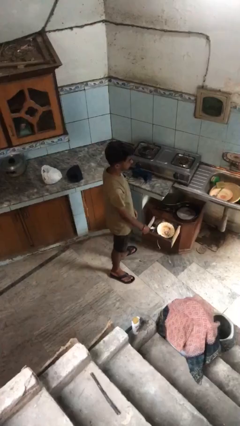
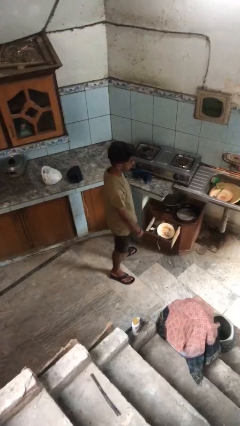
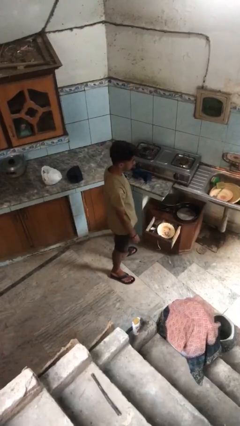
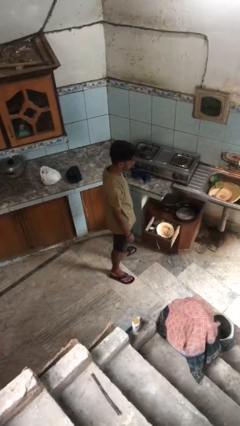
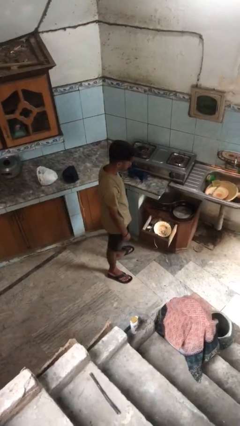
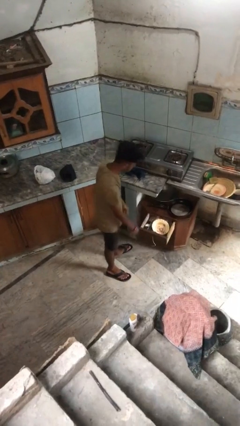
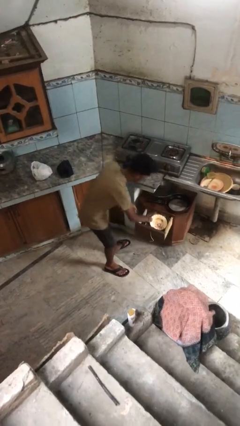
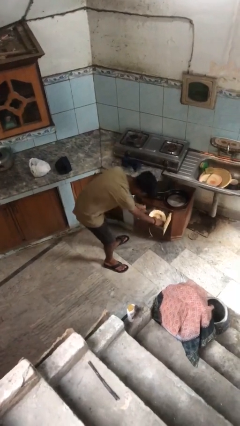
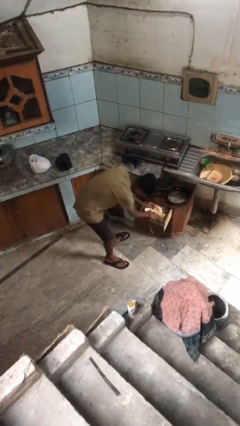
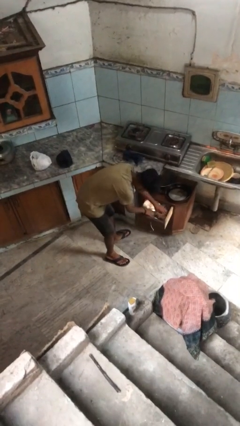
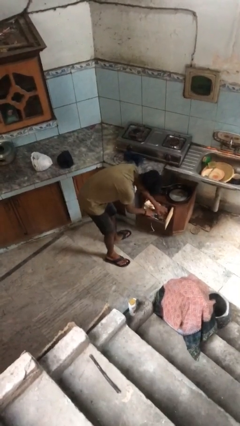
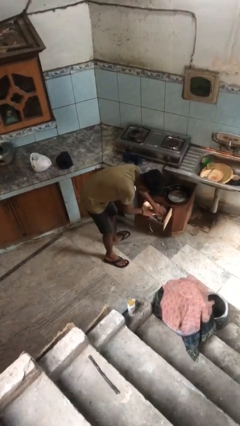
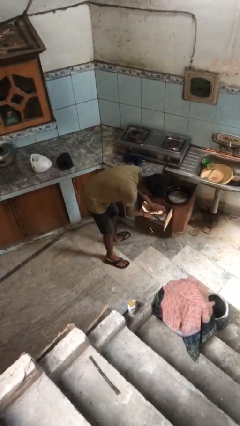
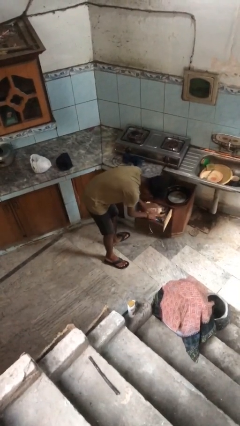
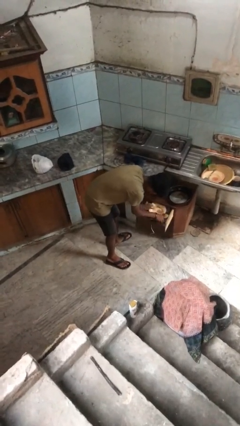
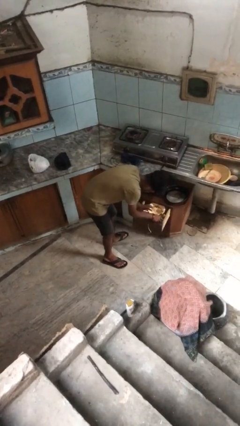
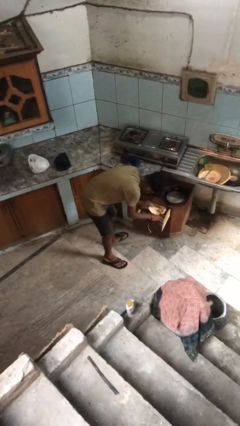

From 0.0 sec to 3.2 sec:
person searches in kitchen drawer

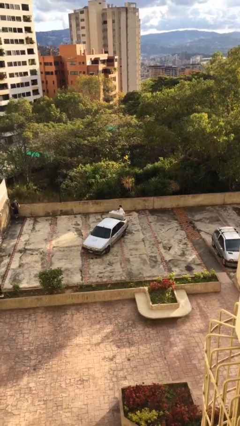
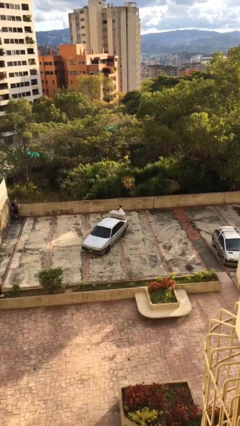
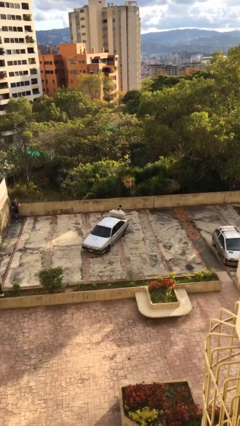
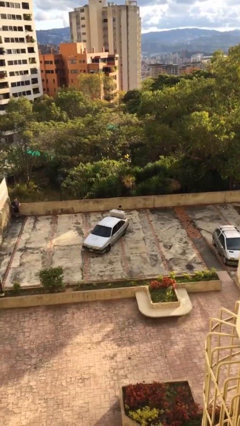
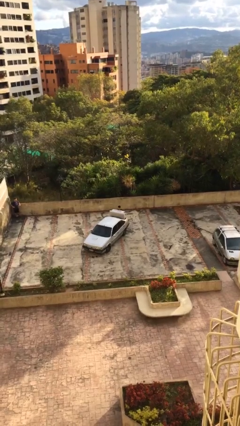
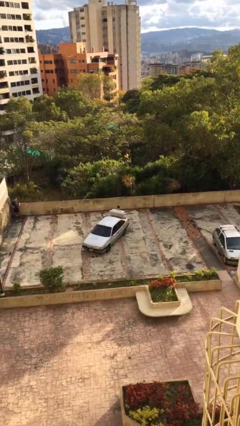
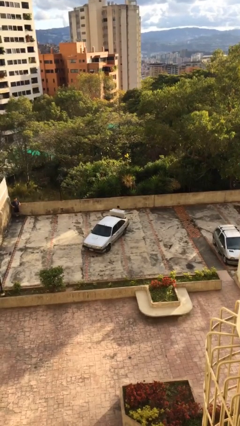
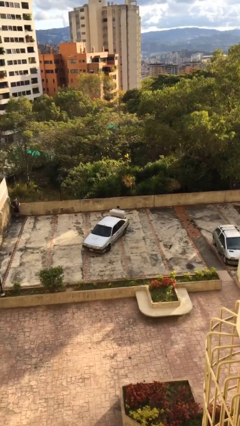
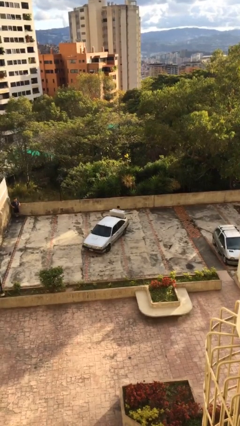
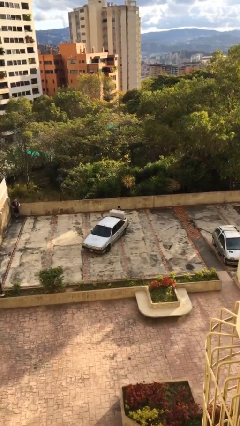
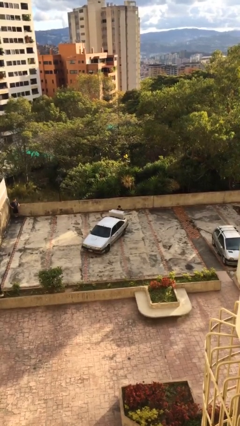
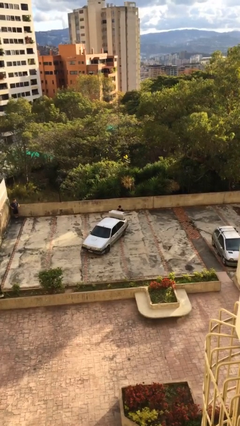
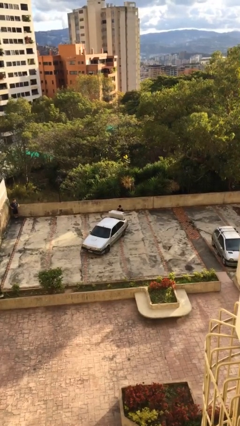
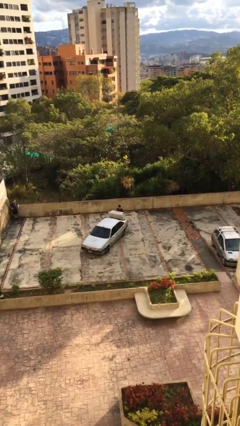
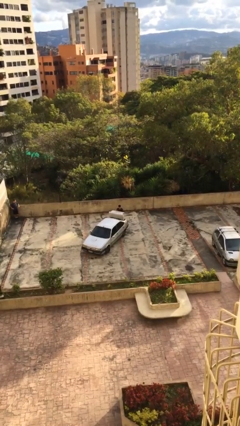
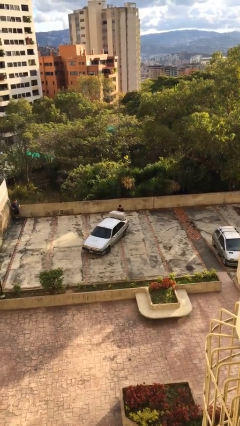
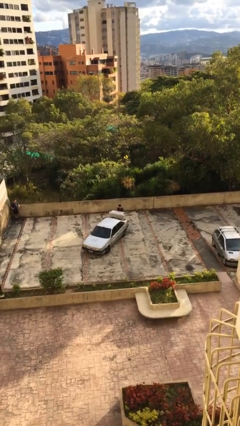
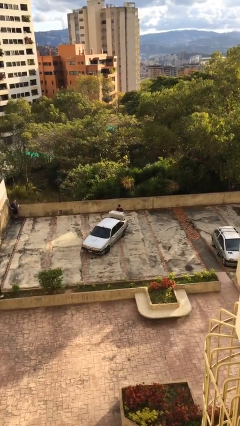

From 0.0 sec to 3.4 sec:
person loads car

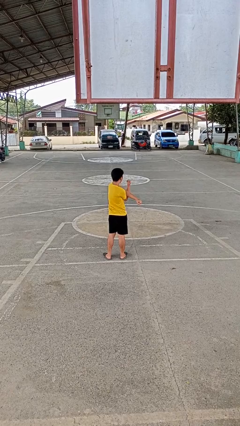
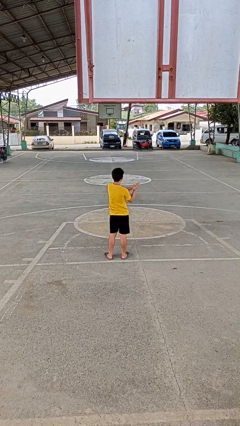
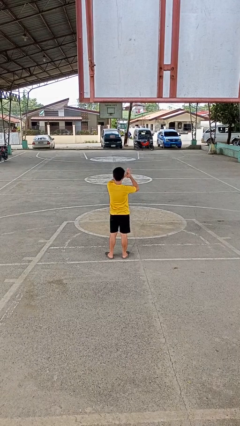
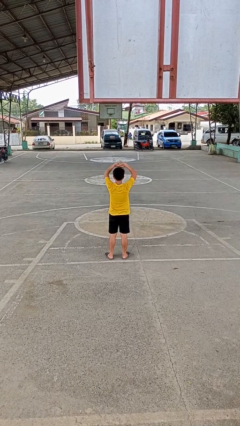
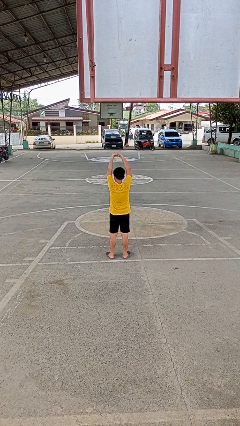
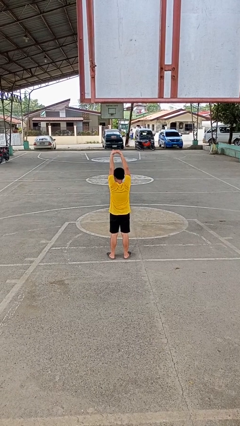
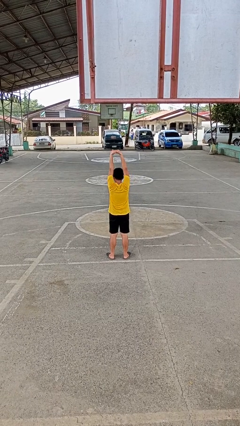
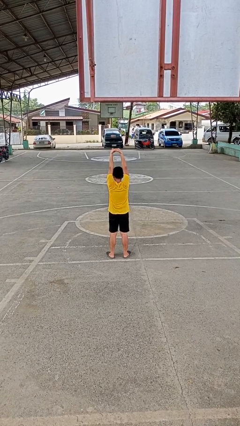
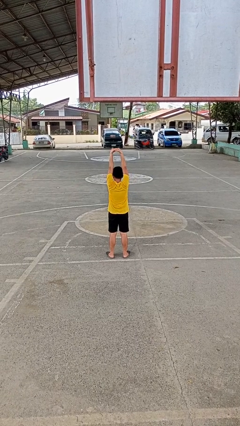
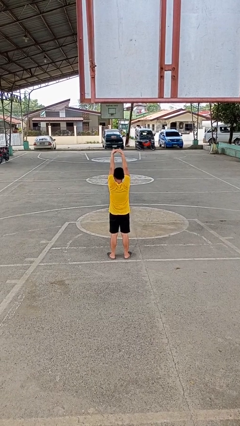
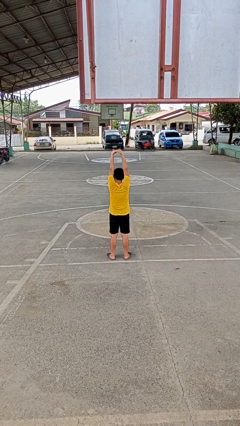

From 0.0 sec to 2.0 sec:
person stretches arms over head

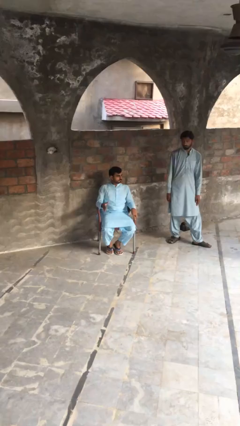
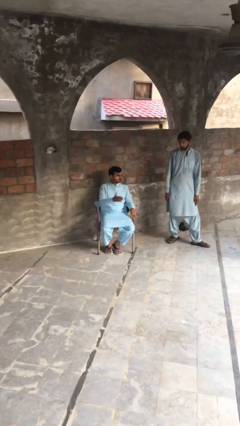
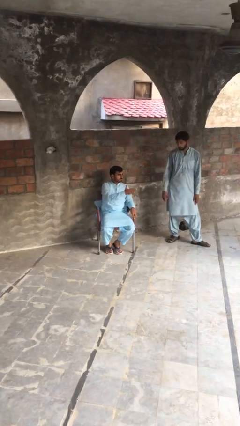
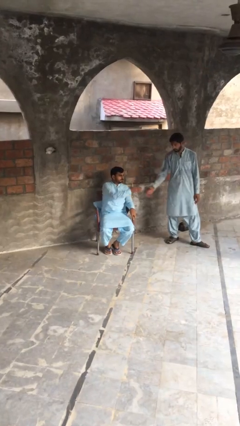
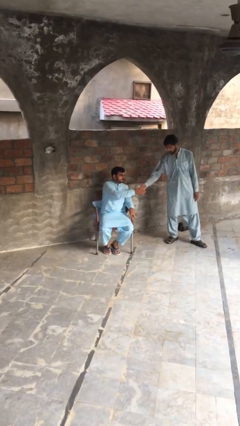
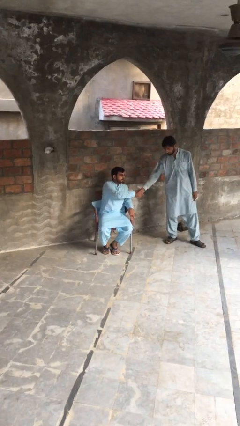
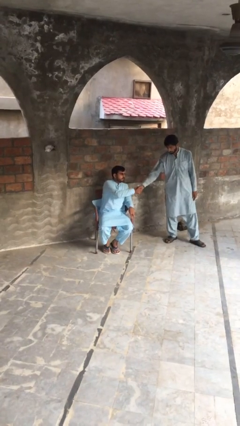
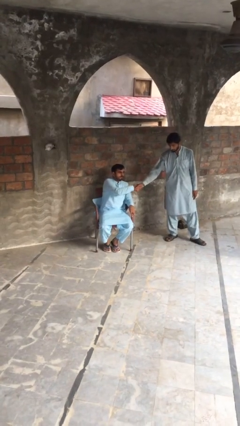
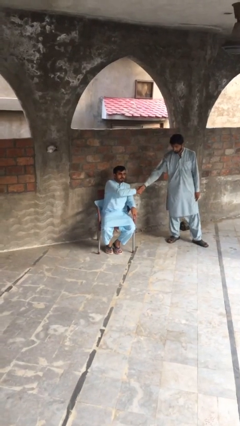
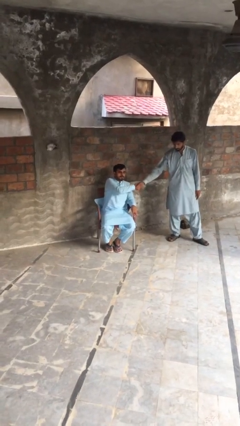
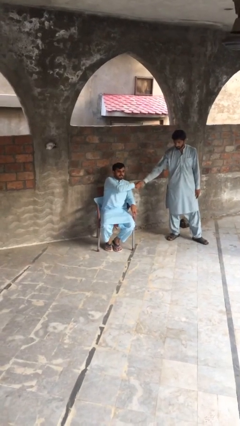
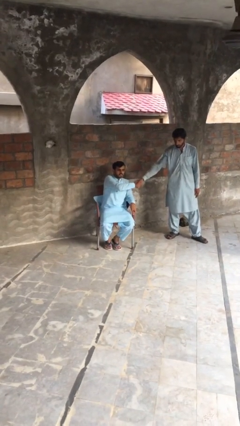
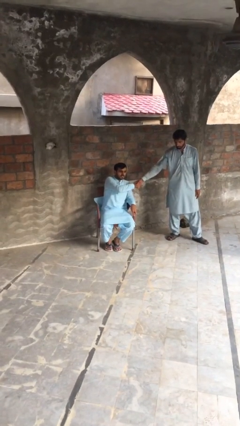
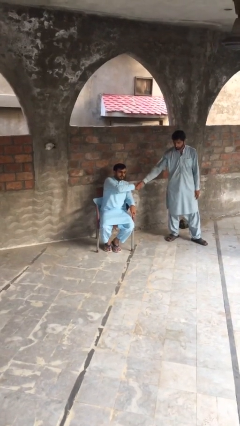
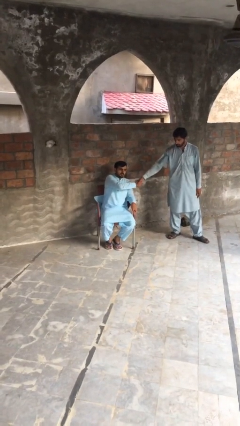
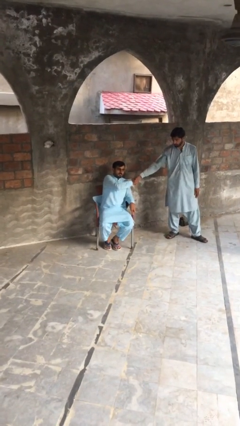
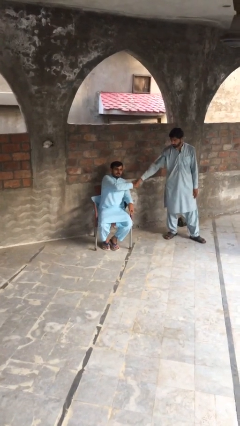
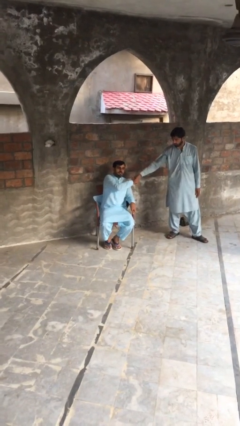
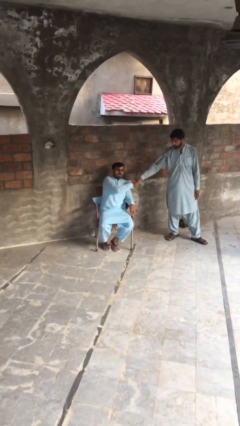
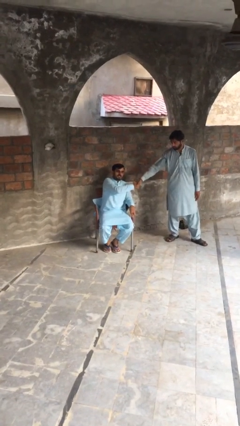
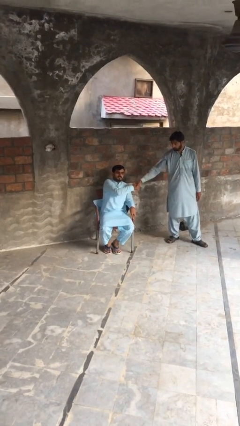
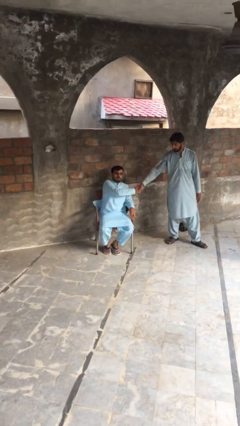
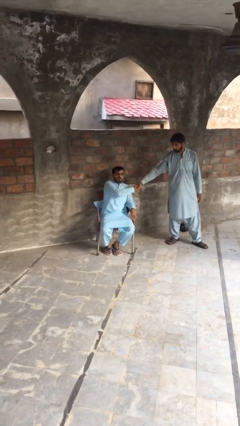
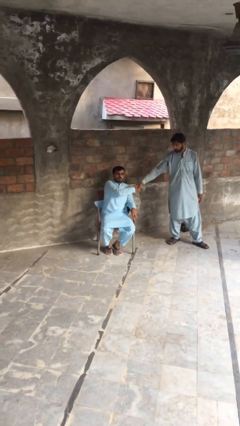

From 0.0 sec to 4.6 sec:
person shakes hand

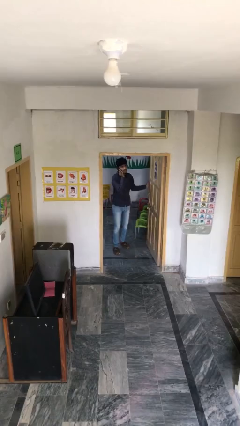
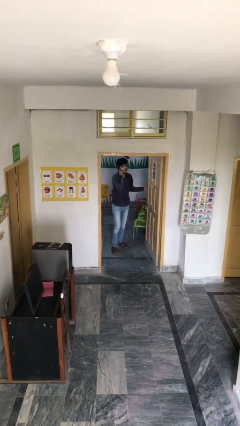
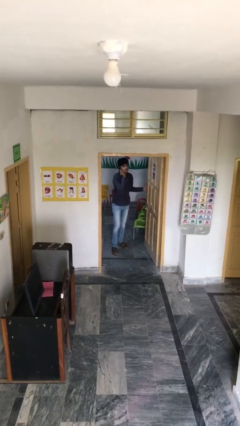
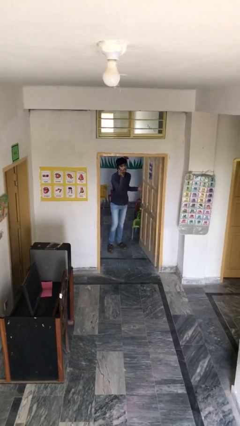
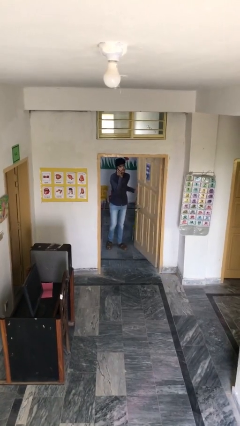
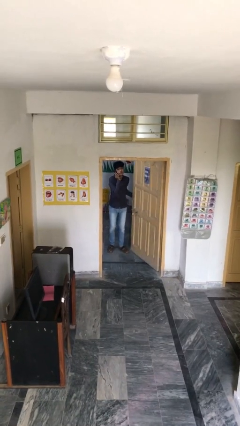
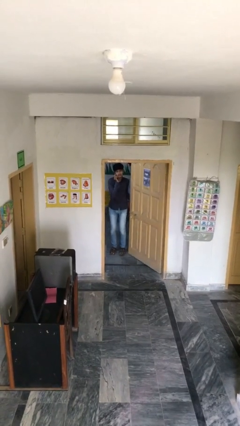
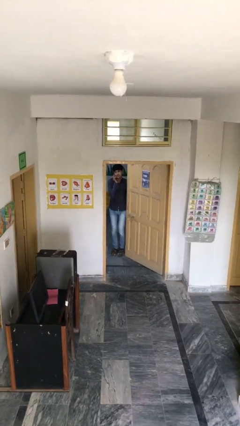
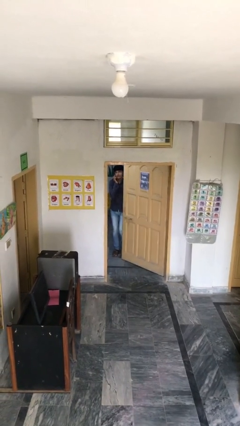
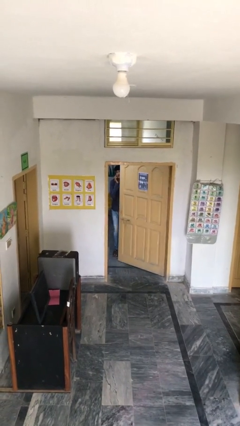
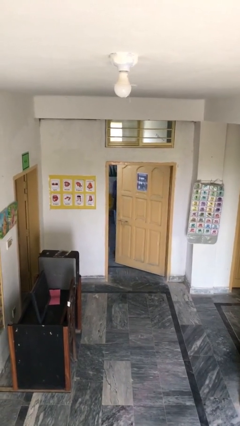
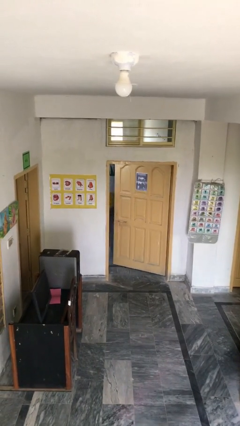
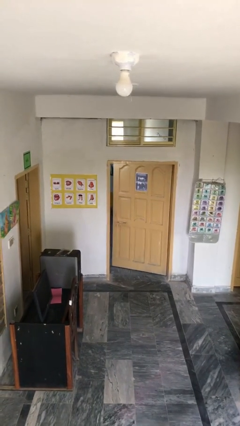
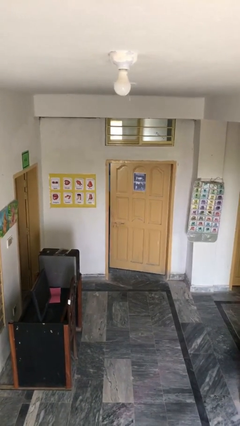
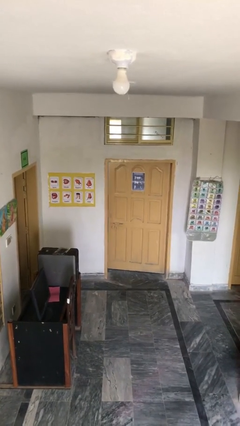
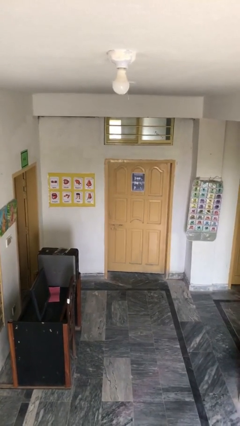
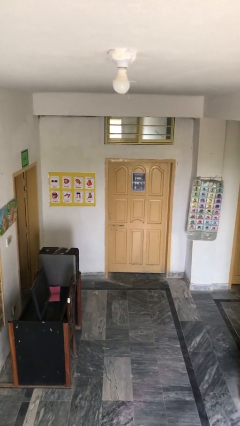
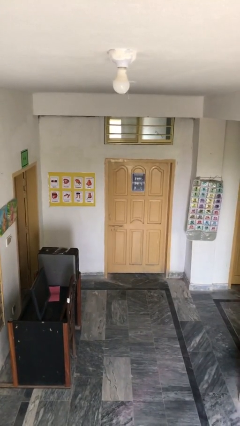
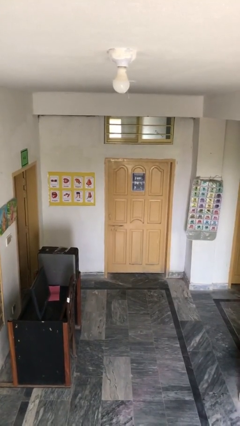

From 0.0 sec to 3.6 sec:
person closes facility door

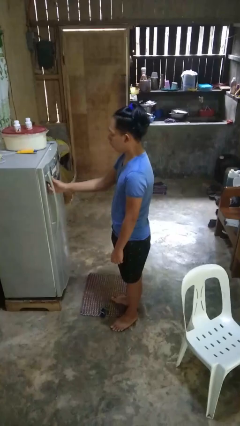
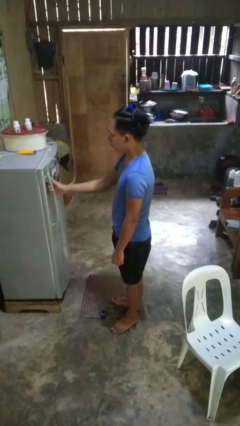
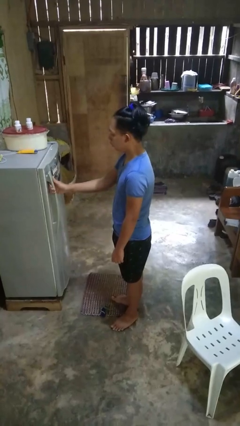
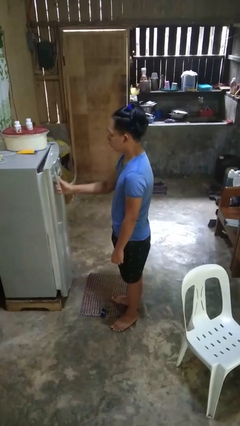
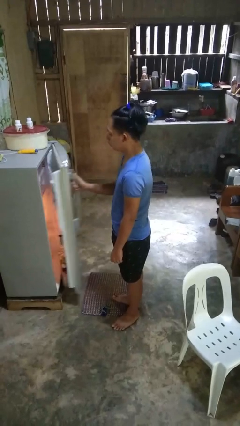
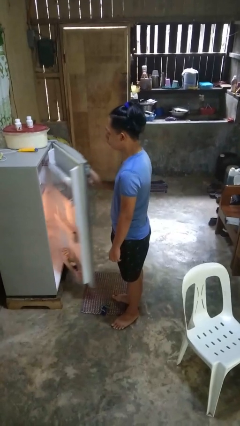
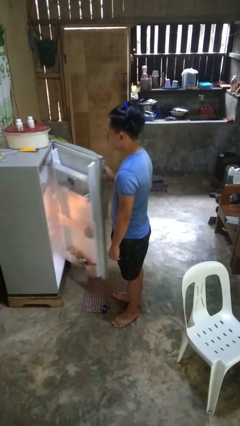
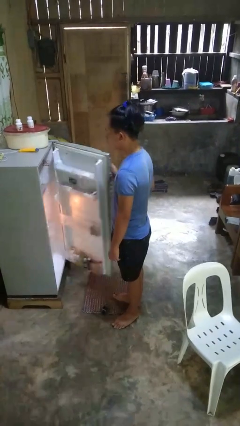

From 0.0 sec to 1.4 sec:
person opens refrigerator
